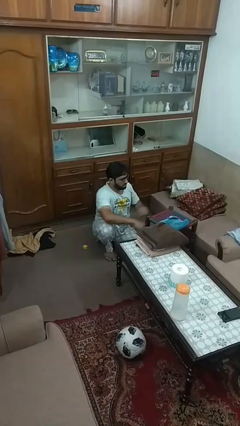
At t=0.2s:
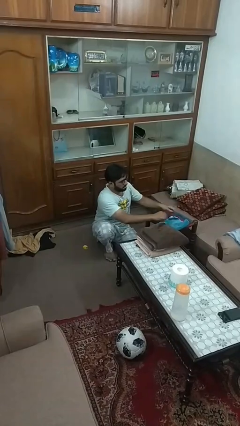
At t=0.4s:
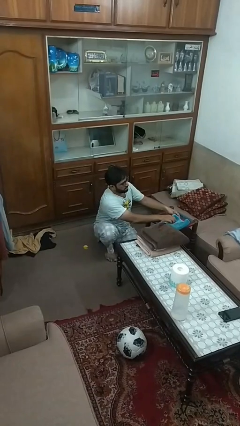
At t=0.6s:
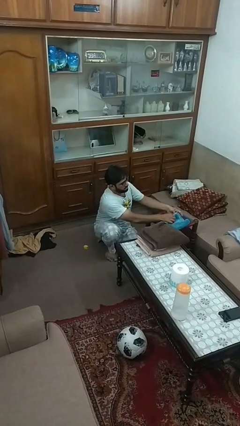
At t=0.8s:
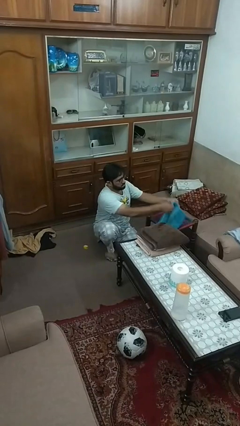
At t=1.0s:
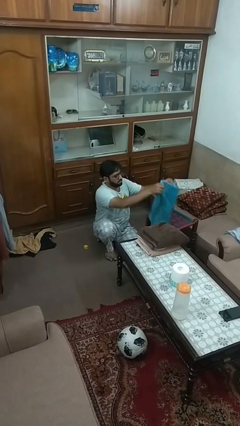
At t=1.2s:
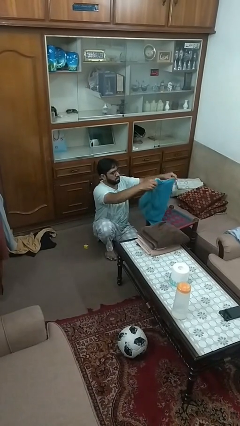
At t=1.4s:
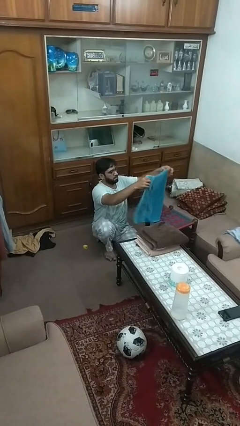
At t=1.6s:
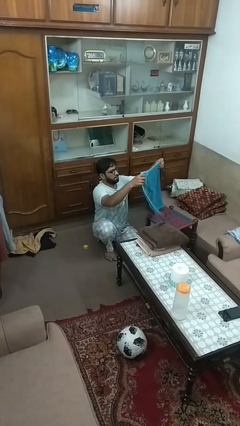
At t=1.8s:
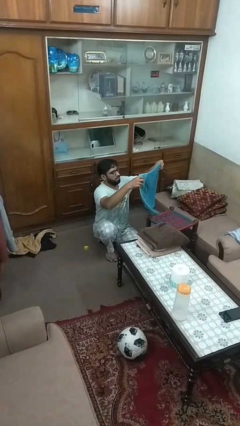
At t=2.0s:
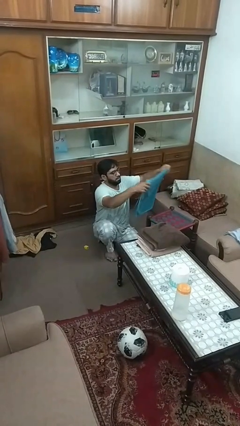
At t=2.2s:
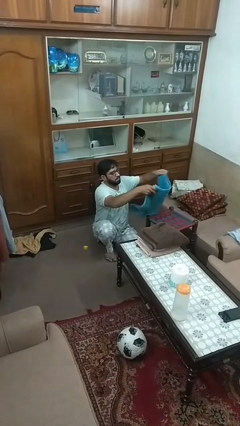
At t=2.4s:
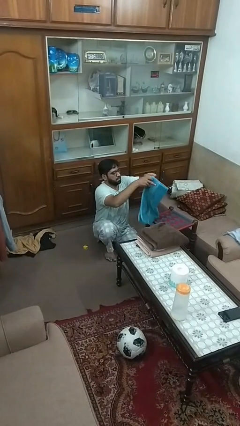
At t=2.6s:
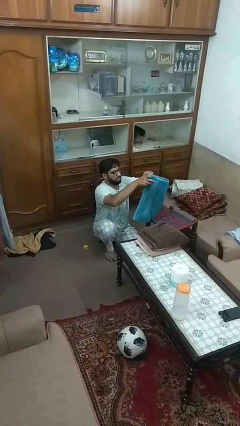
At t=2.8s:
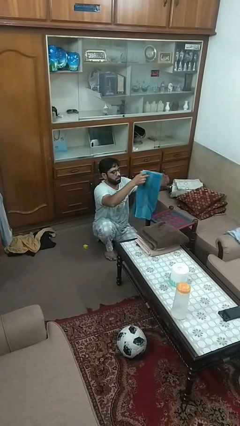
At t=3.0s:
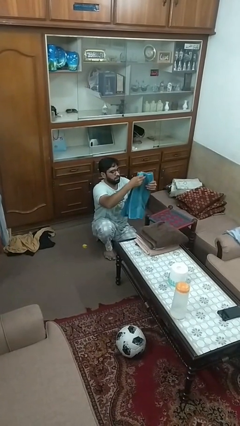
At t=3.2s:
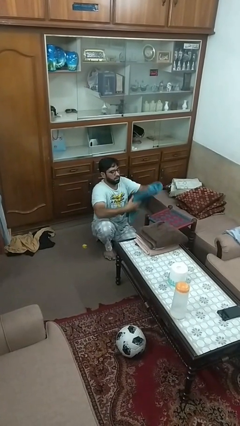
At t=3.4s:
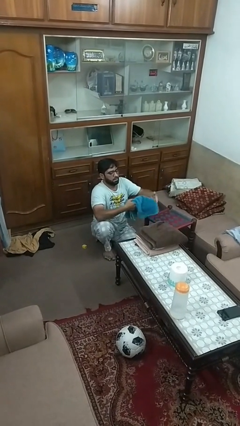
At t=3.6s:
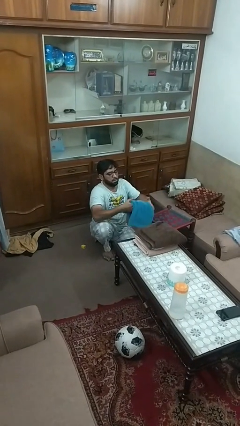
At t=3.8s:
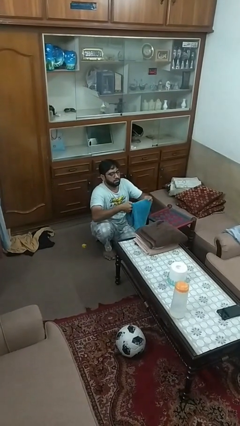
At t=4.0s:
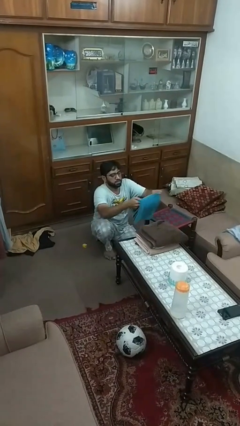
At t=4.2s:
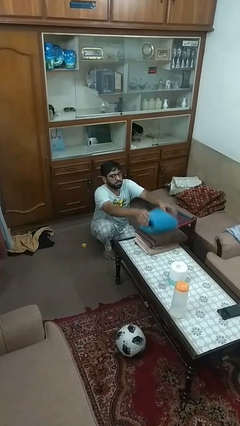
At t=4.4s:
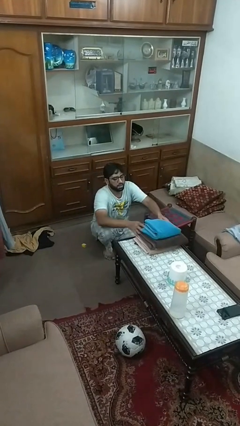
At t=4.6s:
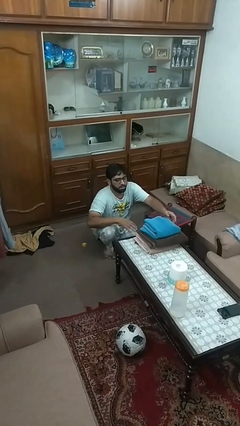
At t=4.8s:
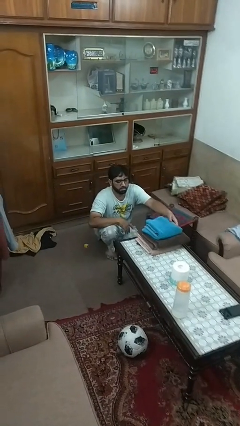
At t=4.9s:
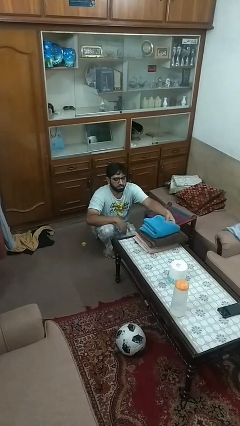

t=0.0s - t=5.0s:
person folds towel

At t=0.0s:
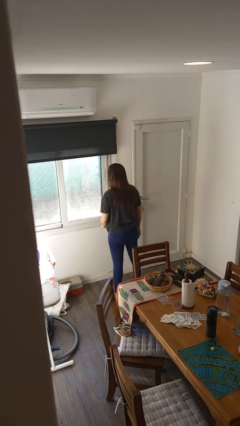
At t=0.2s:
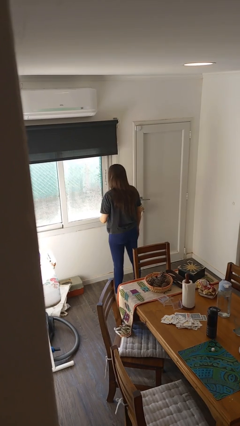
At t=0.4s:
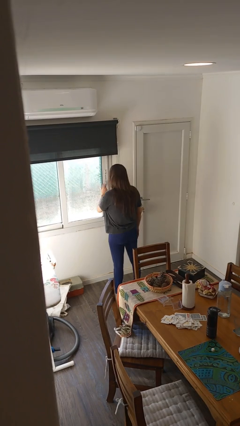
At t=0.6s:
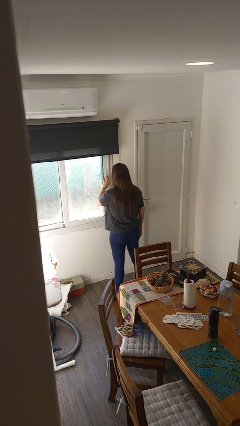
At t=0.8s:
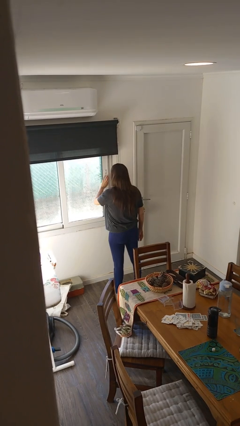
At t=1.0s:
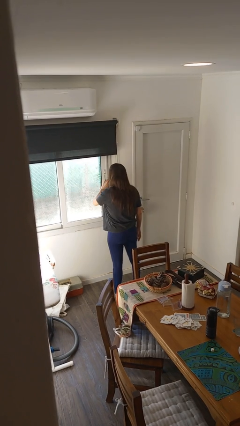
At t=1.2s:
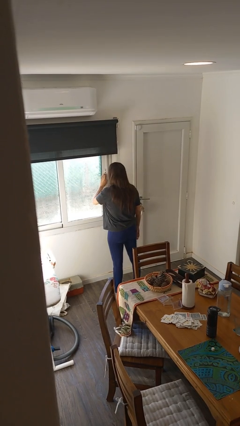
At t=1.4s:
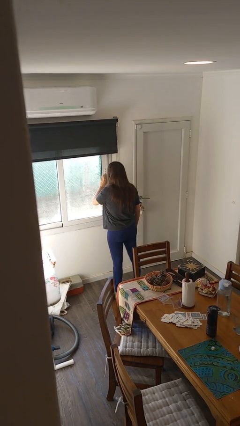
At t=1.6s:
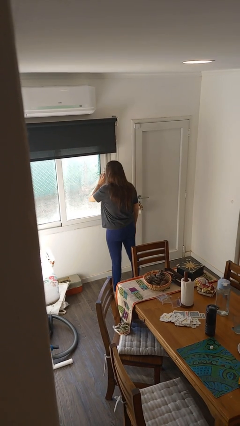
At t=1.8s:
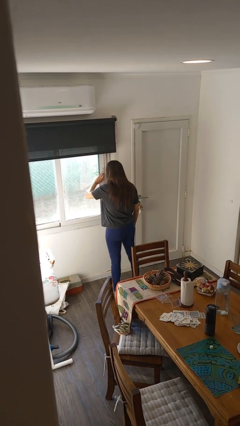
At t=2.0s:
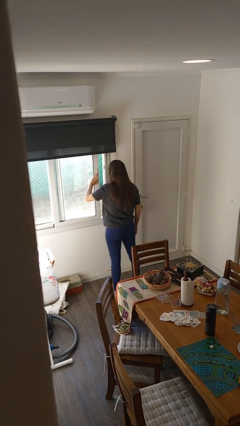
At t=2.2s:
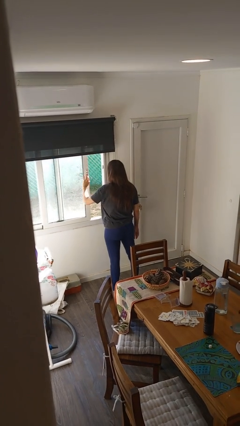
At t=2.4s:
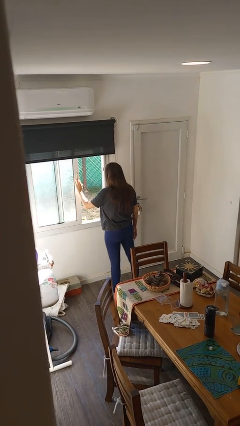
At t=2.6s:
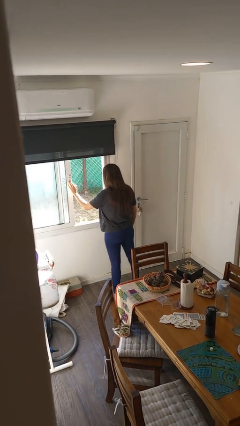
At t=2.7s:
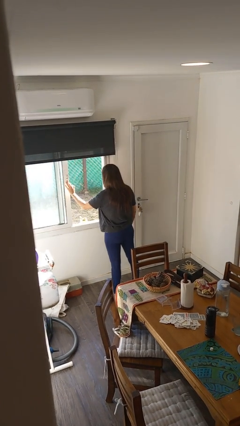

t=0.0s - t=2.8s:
person opens home window

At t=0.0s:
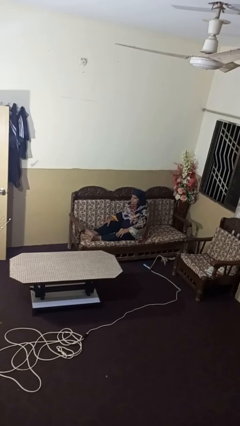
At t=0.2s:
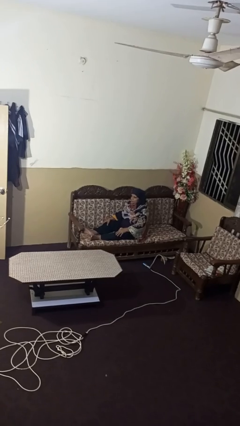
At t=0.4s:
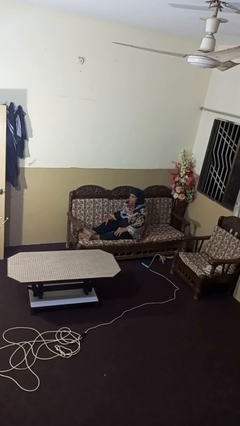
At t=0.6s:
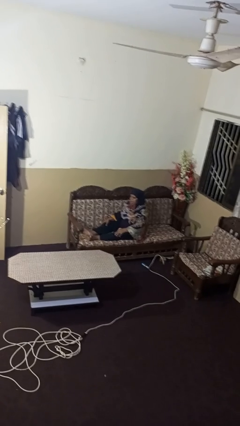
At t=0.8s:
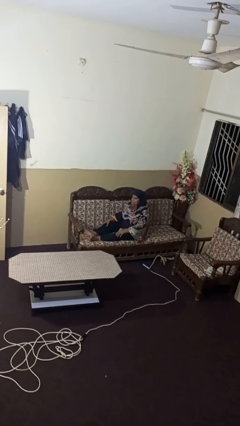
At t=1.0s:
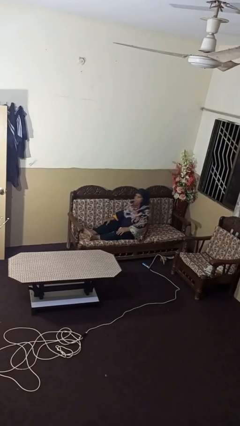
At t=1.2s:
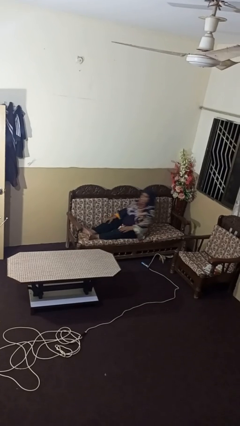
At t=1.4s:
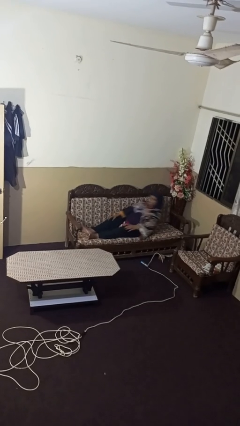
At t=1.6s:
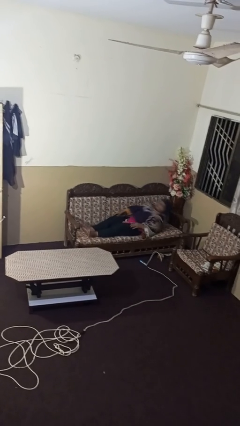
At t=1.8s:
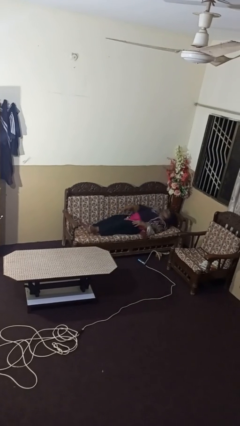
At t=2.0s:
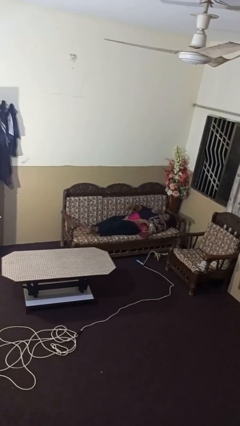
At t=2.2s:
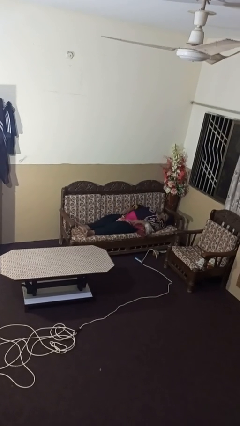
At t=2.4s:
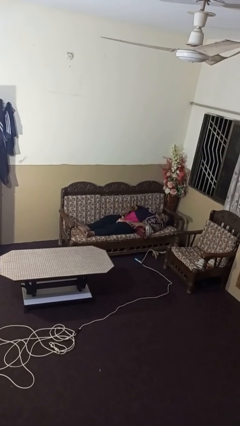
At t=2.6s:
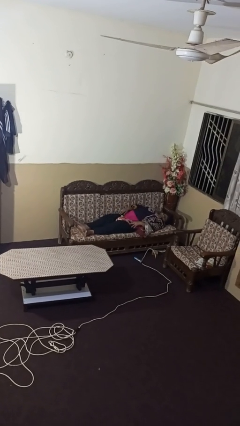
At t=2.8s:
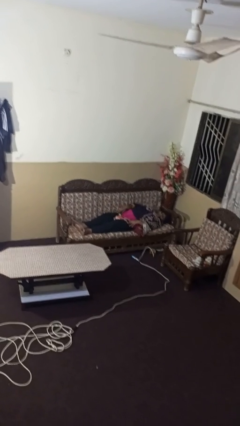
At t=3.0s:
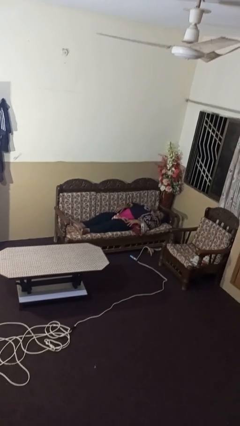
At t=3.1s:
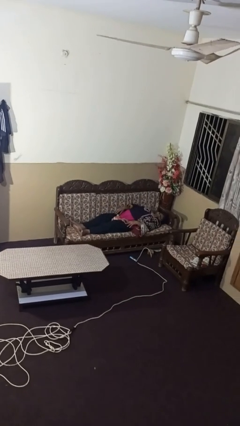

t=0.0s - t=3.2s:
person lies down on couch

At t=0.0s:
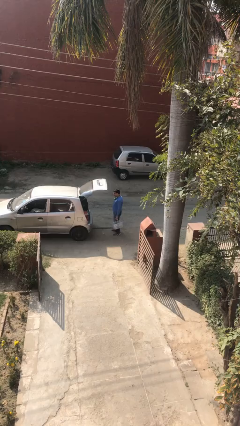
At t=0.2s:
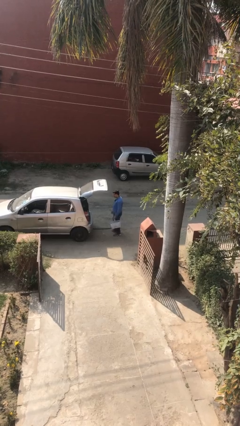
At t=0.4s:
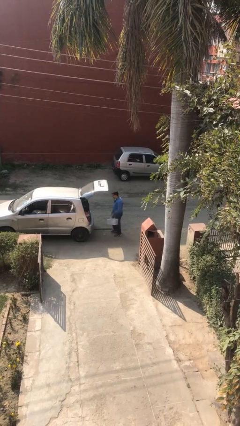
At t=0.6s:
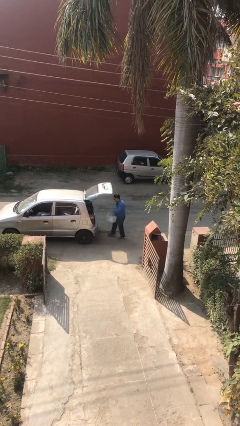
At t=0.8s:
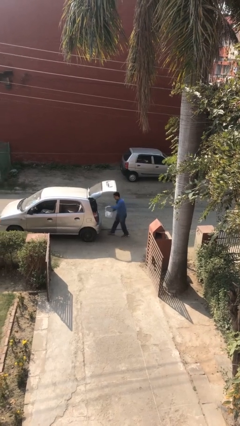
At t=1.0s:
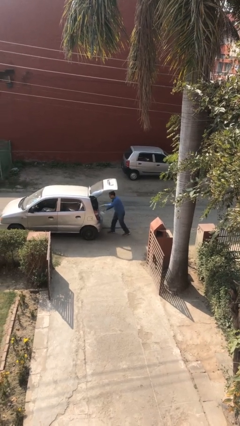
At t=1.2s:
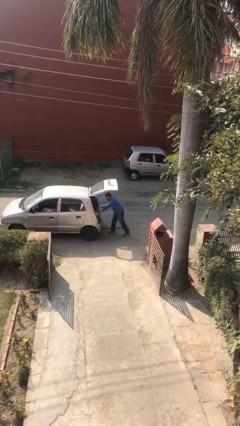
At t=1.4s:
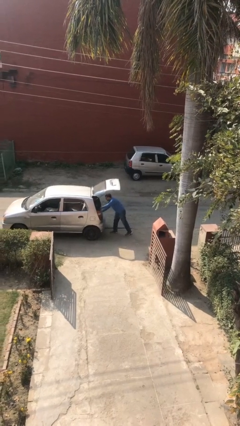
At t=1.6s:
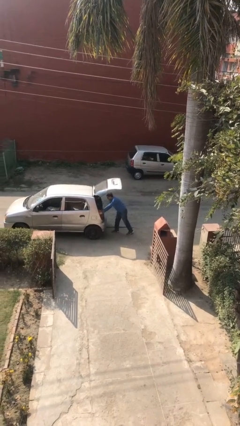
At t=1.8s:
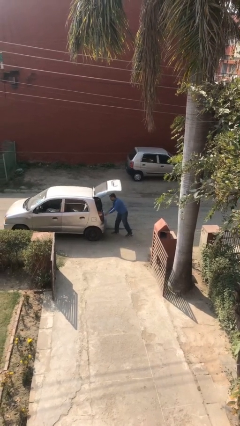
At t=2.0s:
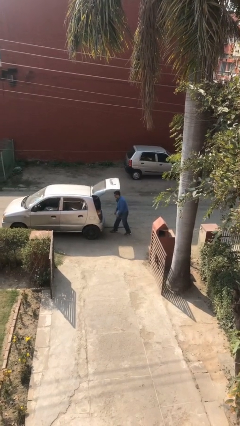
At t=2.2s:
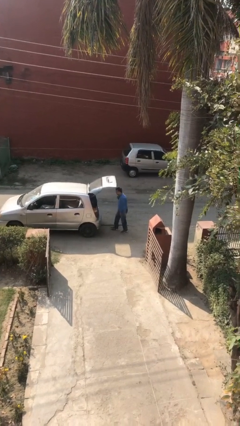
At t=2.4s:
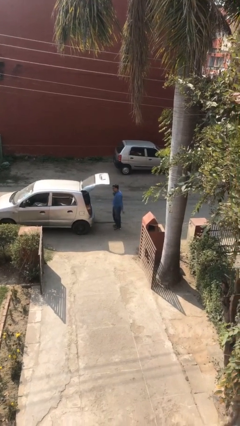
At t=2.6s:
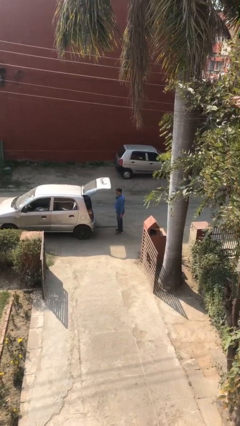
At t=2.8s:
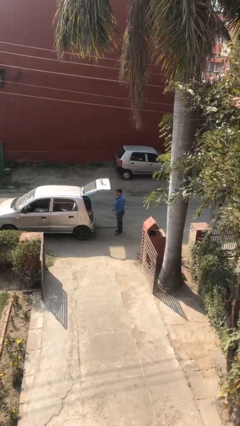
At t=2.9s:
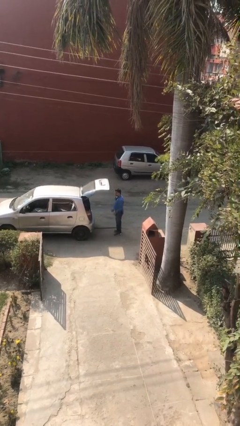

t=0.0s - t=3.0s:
person loads car

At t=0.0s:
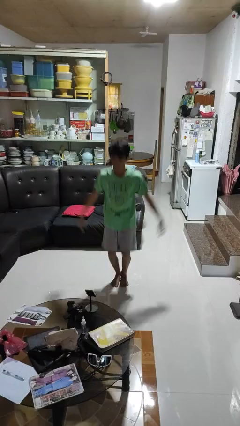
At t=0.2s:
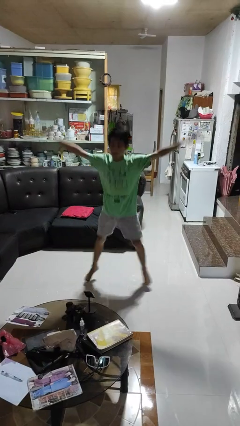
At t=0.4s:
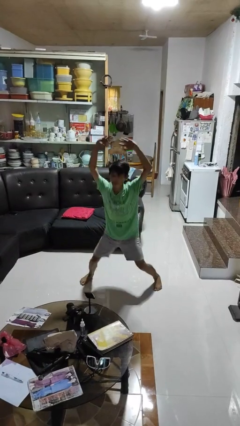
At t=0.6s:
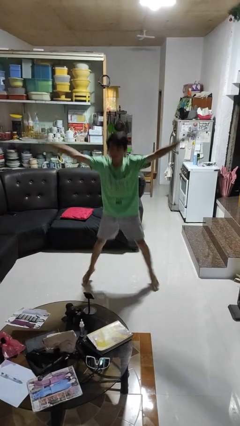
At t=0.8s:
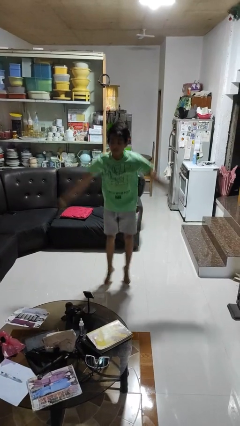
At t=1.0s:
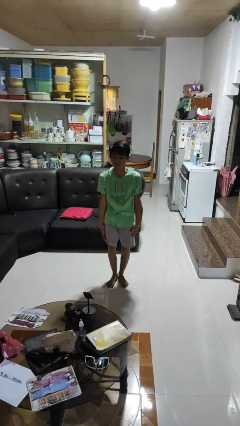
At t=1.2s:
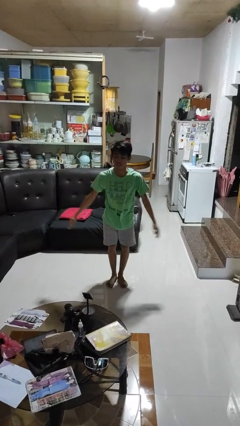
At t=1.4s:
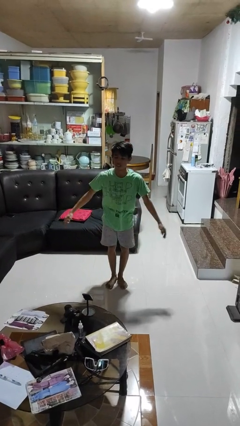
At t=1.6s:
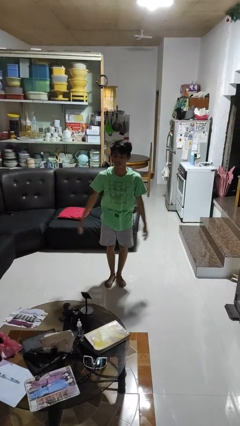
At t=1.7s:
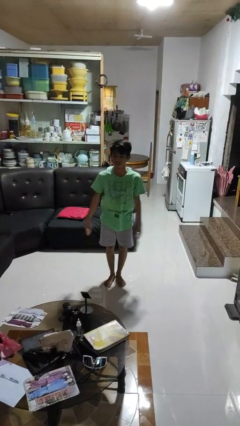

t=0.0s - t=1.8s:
person exercises with jumping jacks

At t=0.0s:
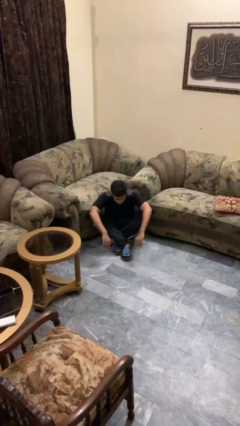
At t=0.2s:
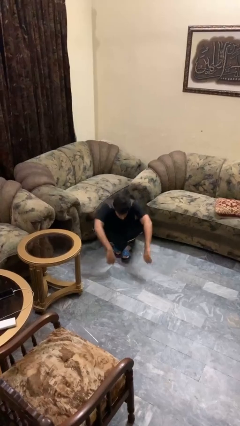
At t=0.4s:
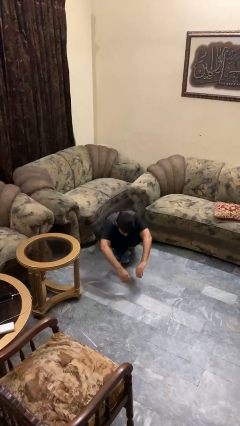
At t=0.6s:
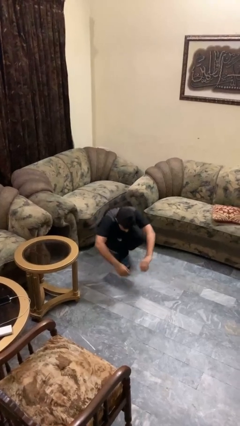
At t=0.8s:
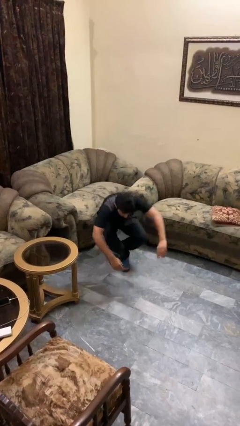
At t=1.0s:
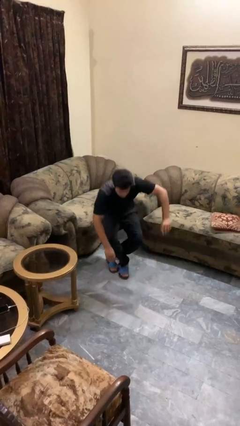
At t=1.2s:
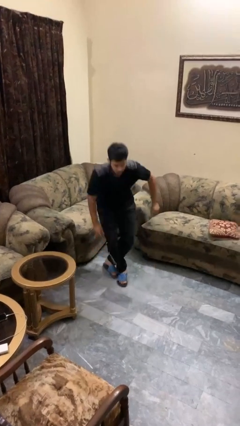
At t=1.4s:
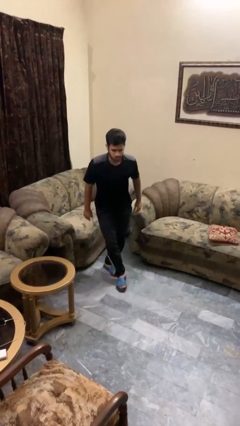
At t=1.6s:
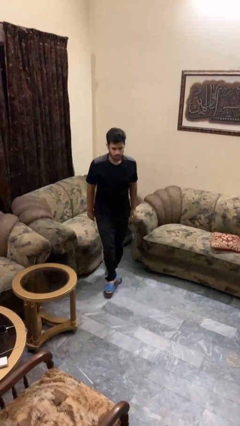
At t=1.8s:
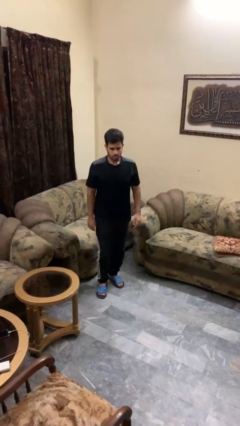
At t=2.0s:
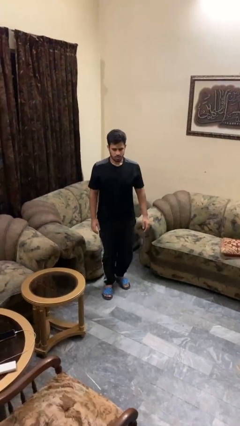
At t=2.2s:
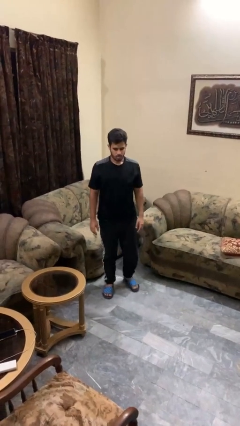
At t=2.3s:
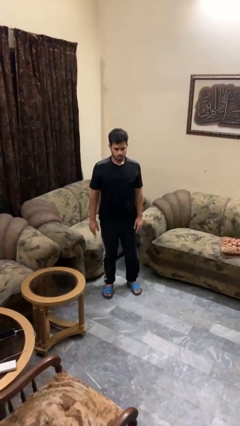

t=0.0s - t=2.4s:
person stands up from floor
